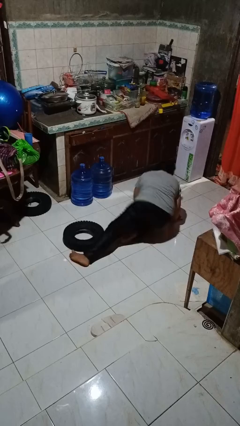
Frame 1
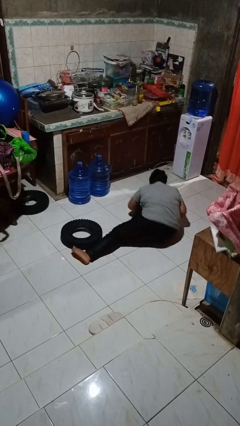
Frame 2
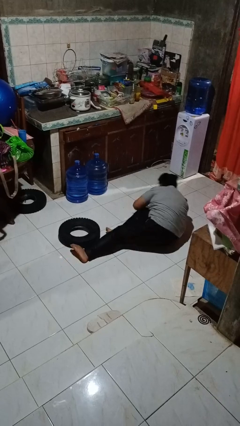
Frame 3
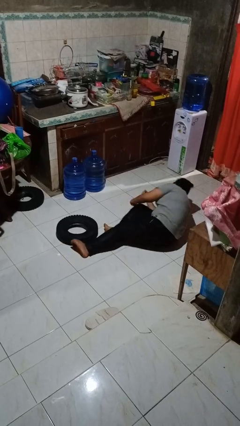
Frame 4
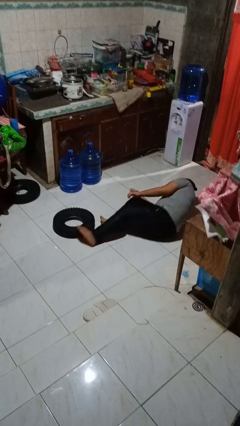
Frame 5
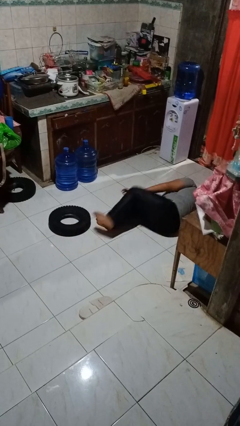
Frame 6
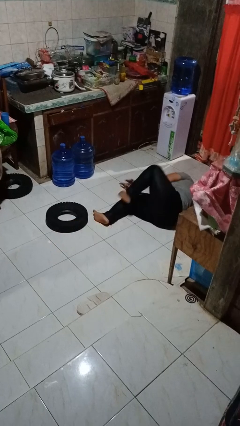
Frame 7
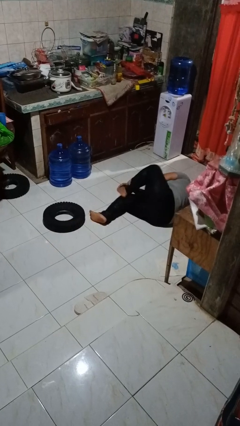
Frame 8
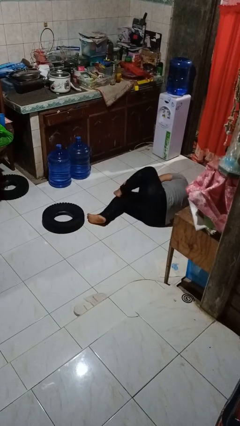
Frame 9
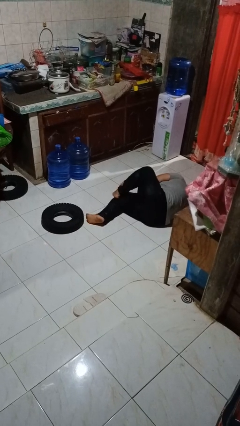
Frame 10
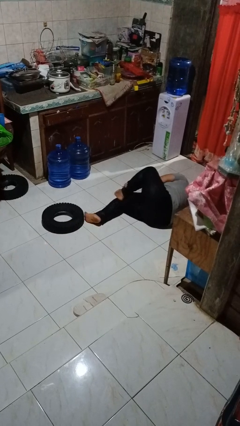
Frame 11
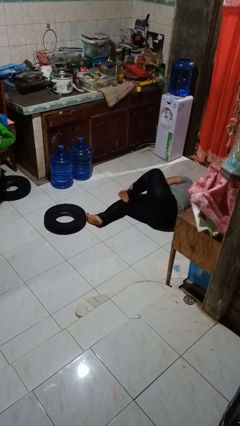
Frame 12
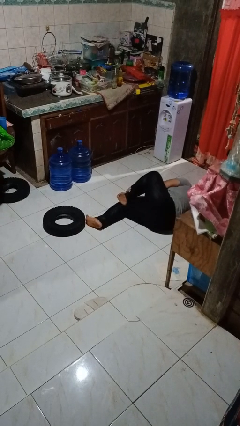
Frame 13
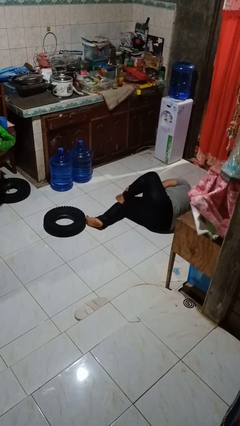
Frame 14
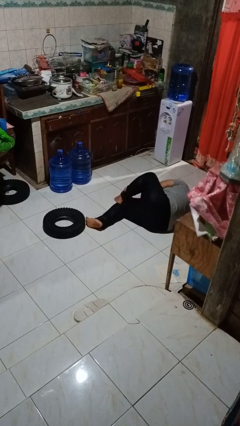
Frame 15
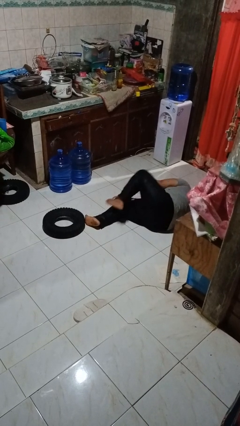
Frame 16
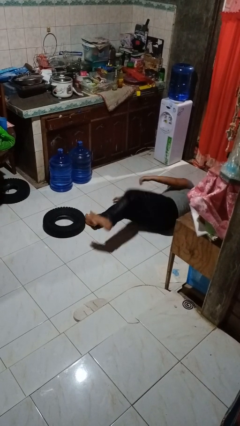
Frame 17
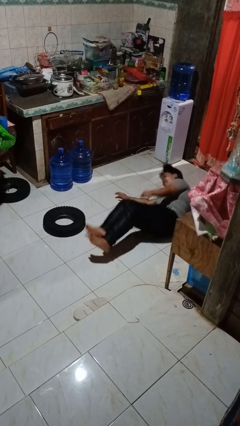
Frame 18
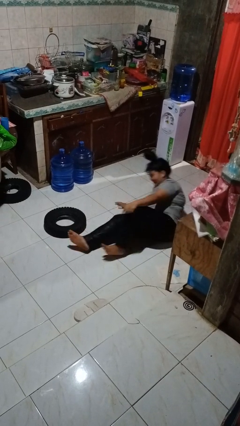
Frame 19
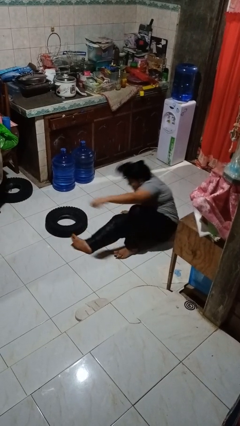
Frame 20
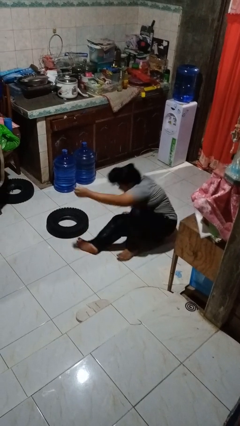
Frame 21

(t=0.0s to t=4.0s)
person lies down on floor

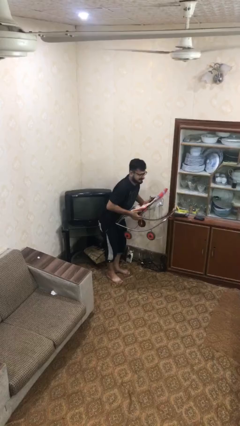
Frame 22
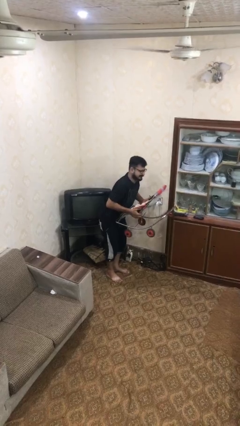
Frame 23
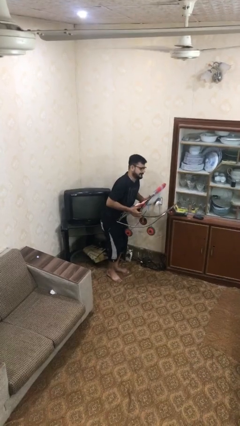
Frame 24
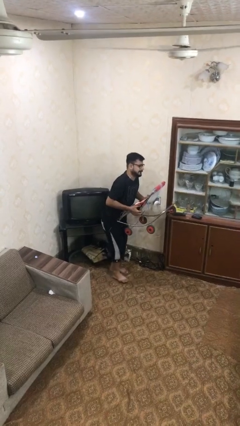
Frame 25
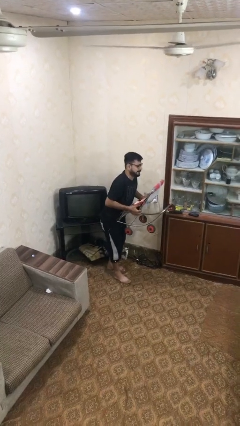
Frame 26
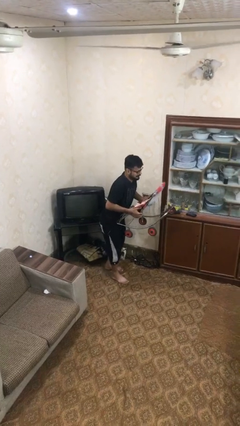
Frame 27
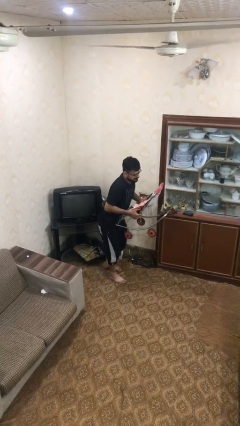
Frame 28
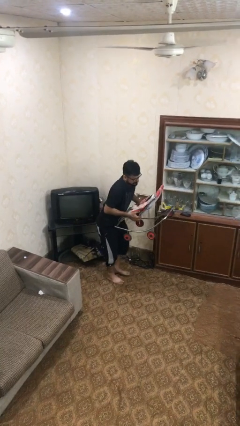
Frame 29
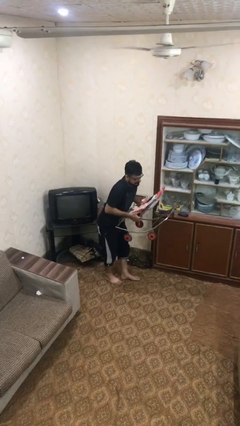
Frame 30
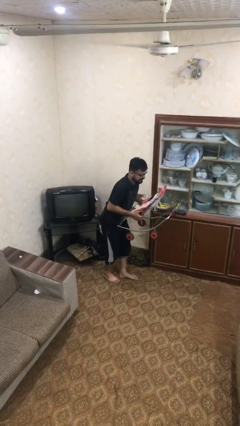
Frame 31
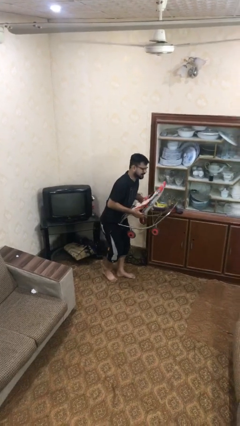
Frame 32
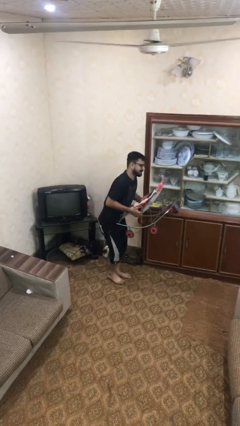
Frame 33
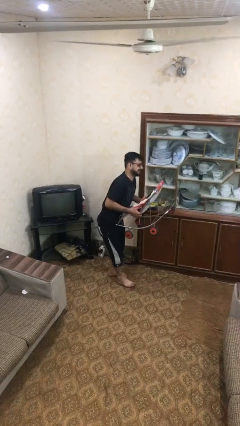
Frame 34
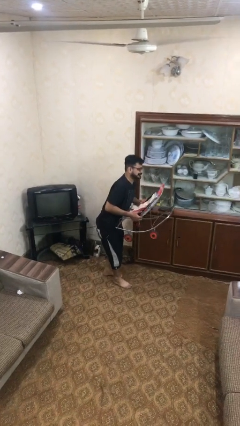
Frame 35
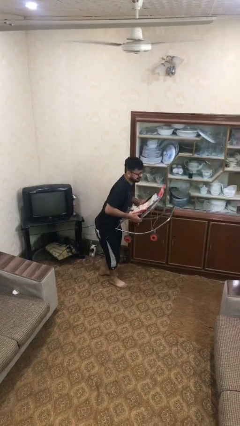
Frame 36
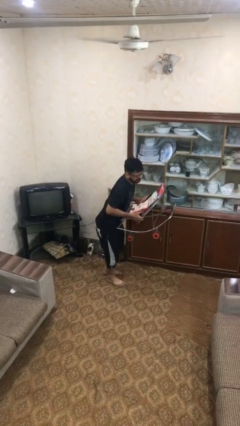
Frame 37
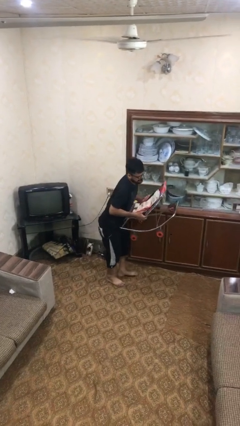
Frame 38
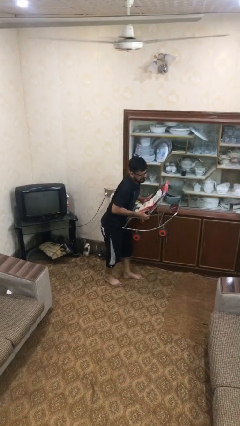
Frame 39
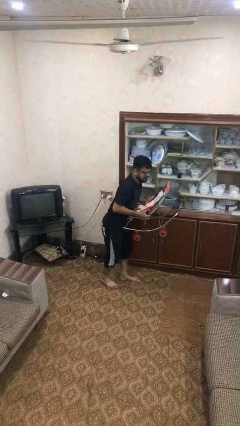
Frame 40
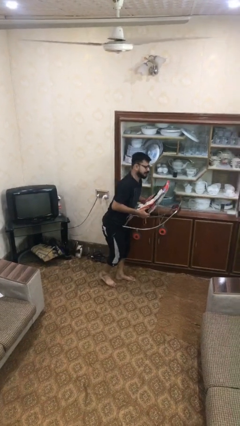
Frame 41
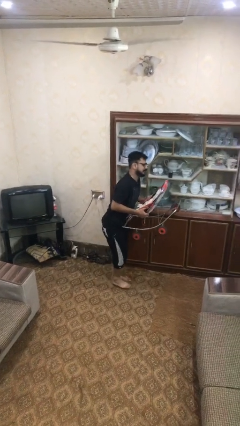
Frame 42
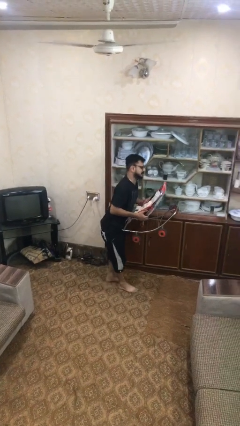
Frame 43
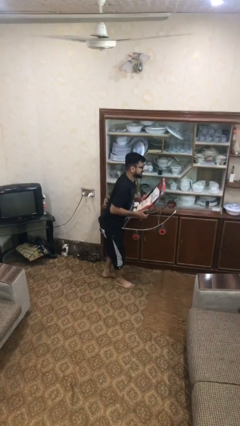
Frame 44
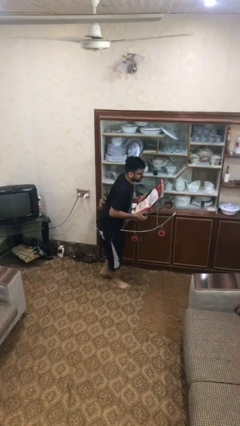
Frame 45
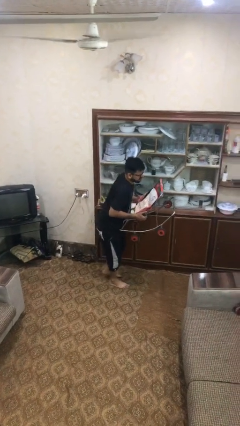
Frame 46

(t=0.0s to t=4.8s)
person carries heavy object

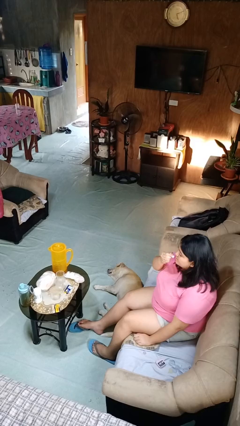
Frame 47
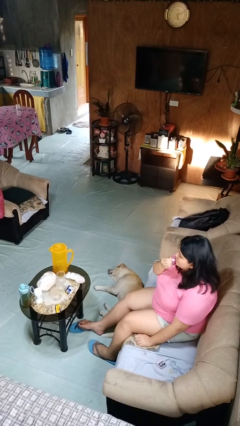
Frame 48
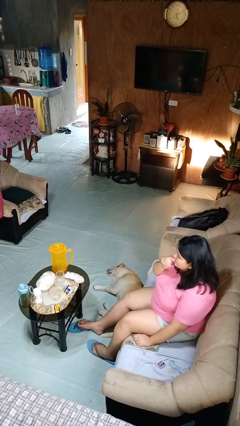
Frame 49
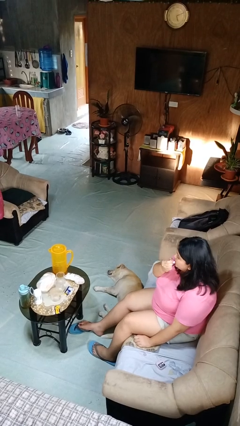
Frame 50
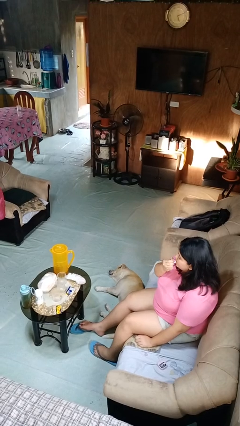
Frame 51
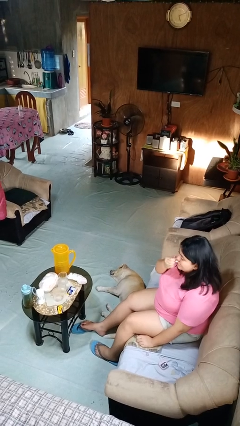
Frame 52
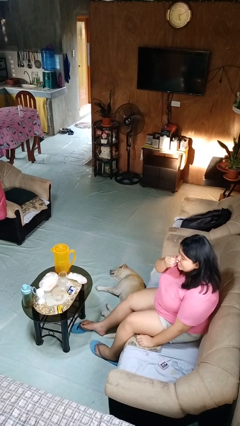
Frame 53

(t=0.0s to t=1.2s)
person applies lip makeup

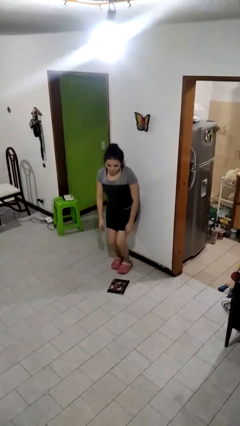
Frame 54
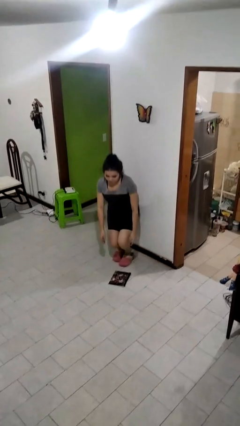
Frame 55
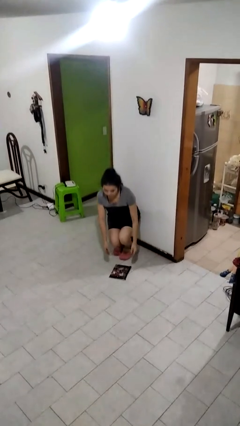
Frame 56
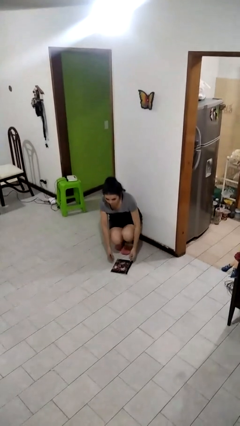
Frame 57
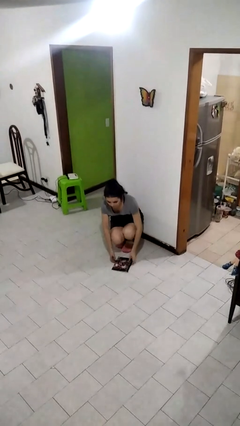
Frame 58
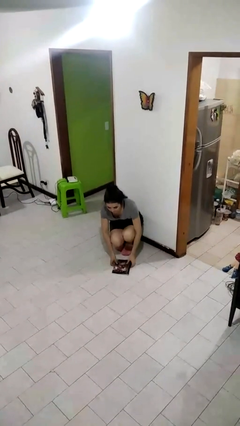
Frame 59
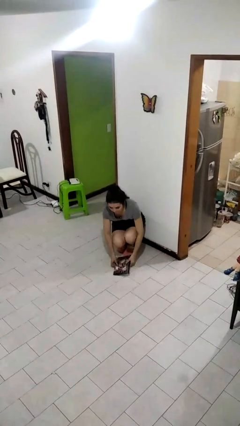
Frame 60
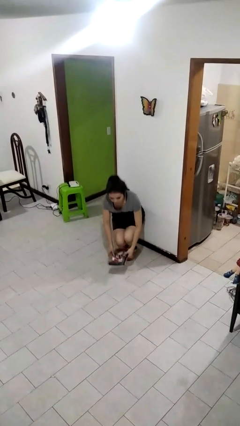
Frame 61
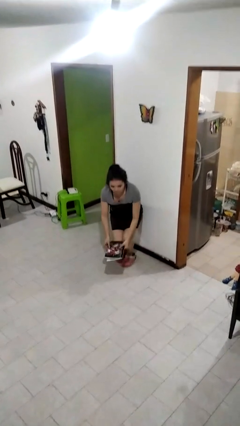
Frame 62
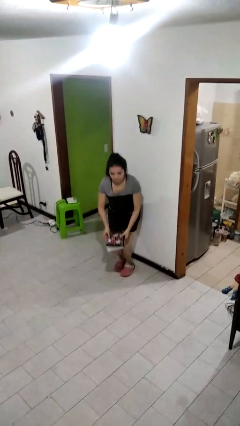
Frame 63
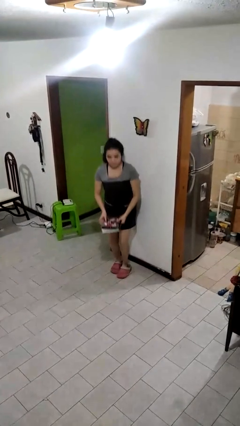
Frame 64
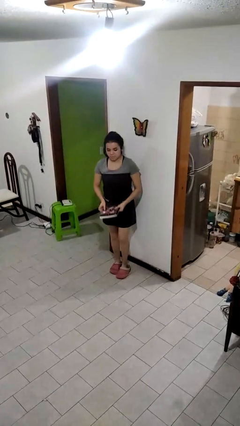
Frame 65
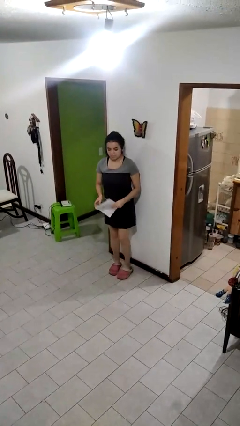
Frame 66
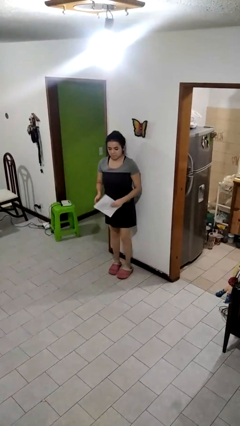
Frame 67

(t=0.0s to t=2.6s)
person picks up object from floor

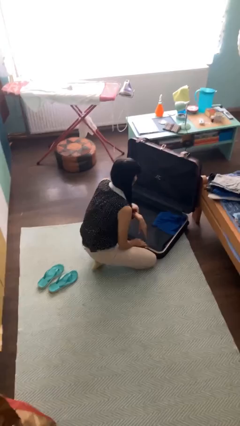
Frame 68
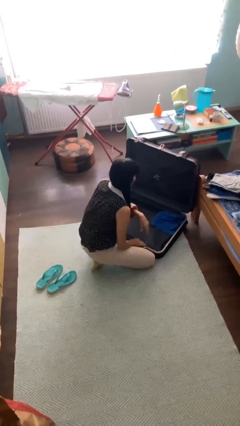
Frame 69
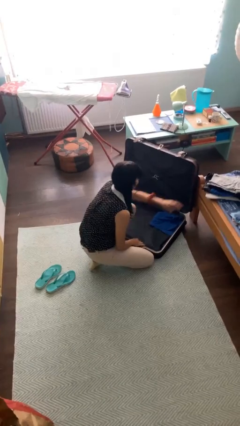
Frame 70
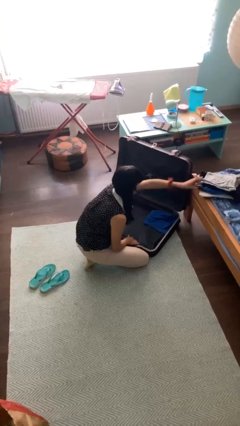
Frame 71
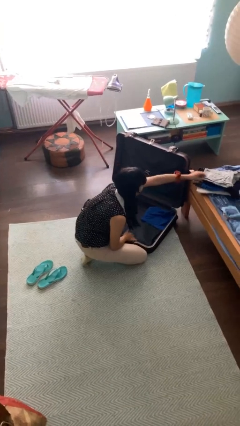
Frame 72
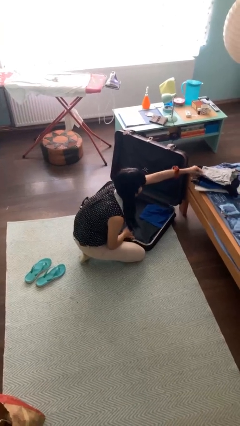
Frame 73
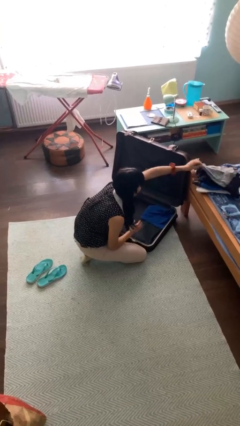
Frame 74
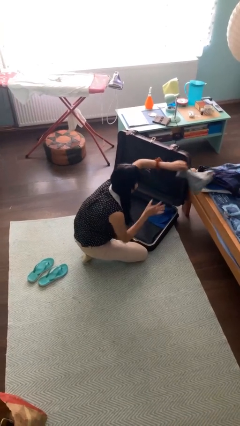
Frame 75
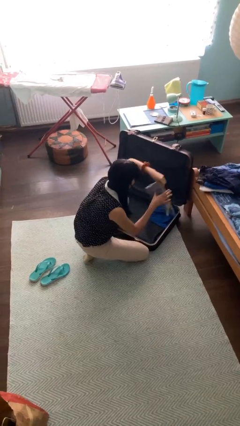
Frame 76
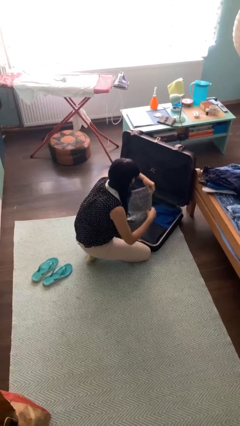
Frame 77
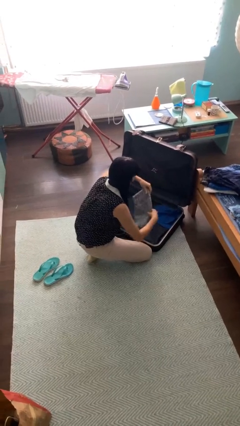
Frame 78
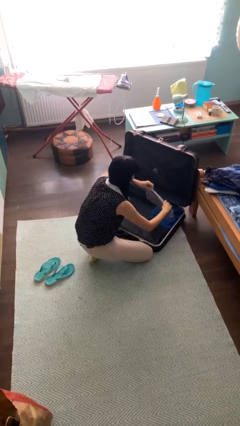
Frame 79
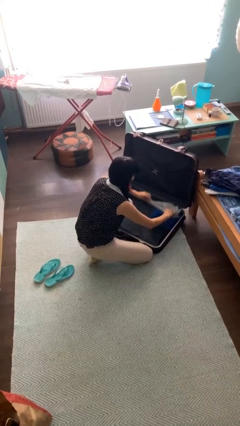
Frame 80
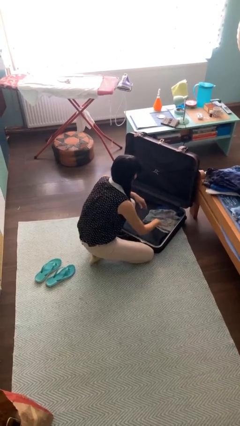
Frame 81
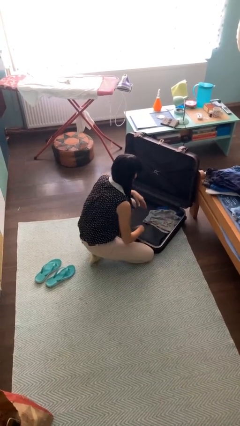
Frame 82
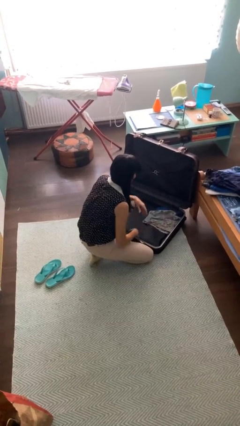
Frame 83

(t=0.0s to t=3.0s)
person loads clothes into suitcase

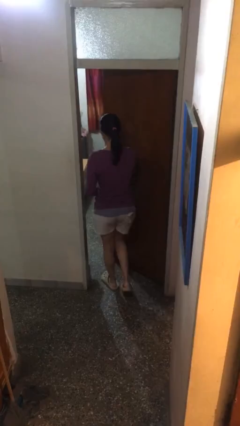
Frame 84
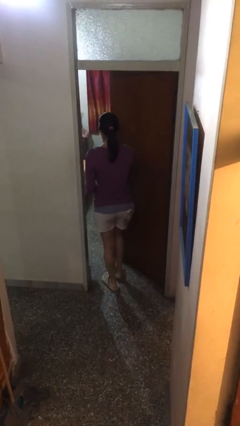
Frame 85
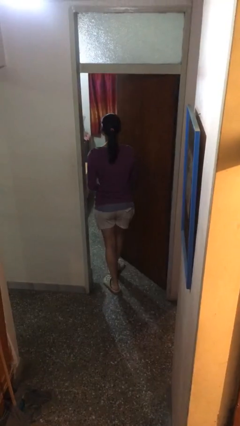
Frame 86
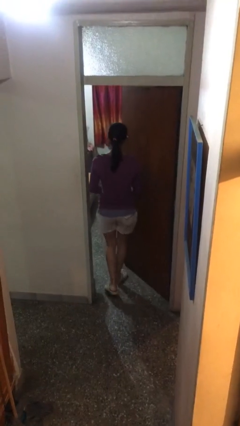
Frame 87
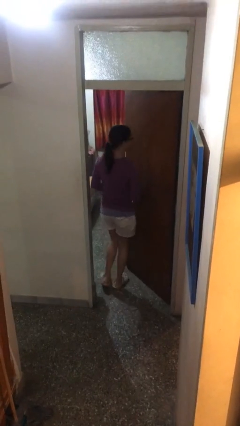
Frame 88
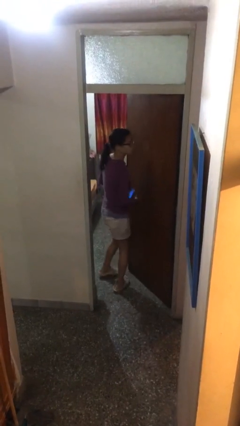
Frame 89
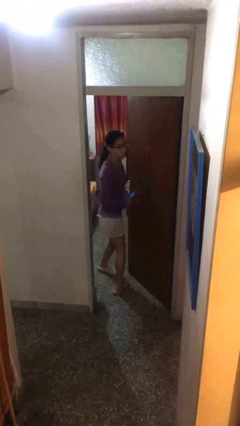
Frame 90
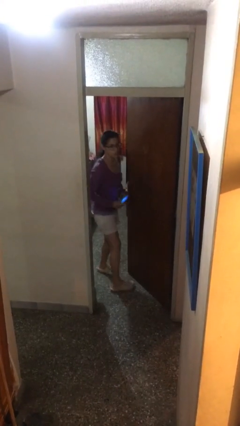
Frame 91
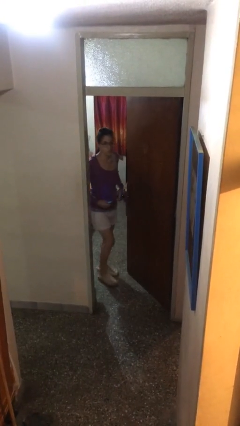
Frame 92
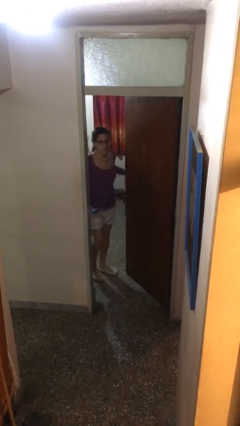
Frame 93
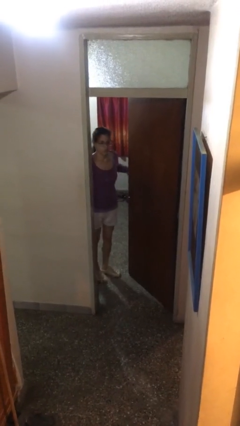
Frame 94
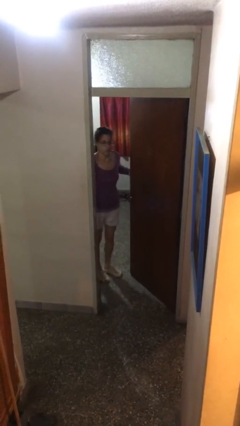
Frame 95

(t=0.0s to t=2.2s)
person exits scene through structure
